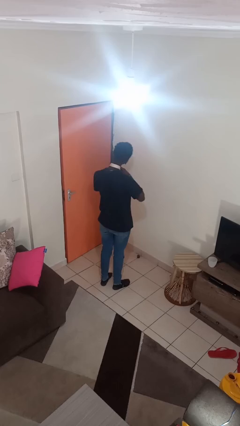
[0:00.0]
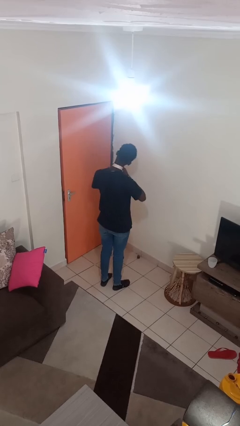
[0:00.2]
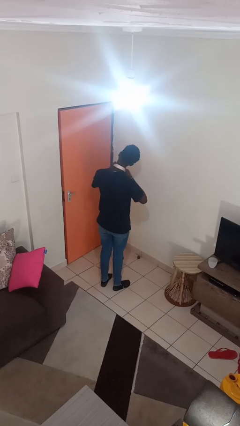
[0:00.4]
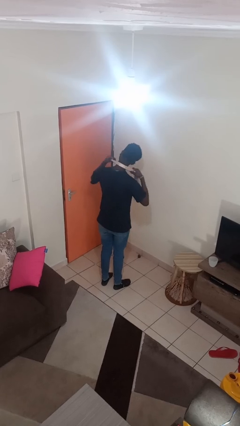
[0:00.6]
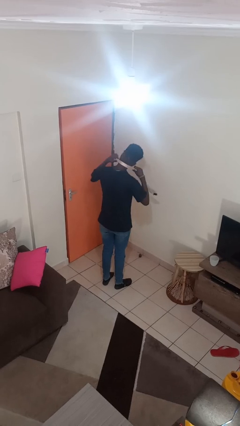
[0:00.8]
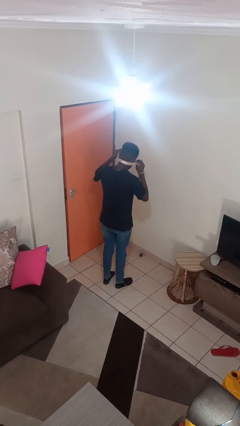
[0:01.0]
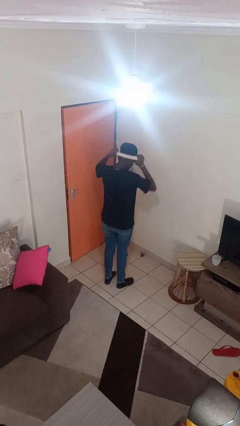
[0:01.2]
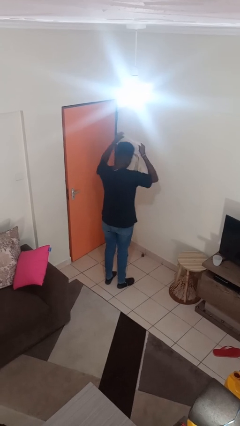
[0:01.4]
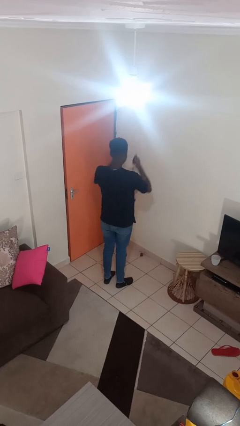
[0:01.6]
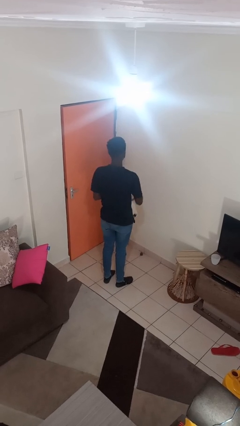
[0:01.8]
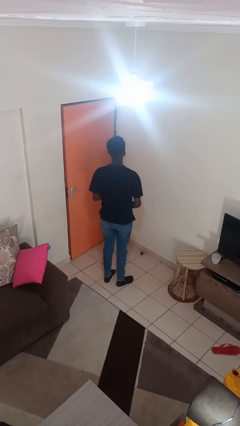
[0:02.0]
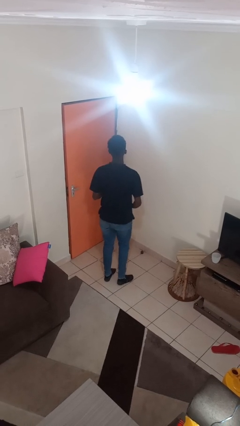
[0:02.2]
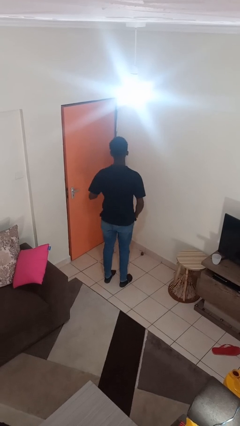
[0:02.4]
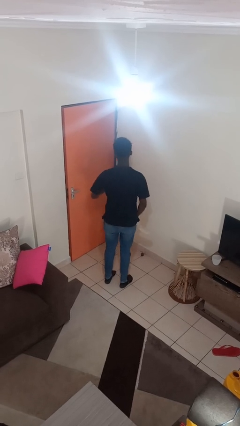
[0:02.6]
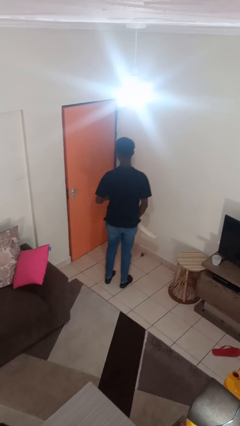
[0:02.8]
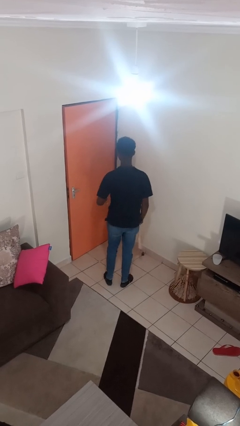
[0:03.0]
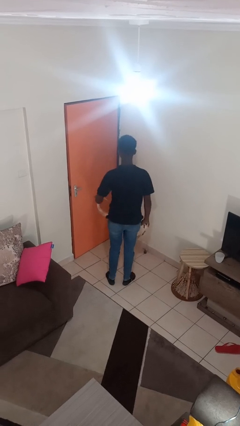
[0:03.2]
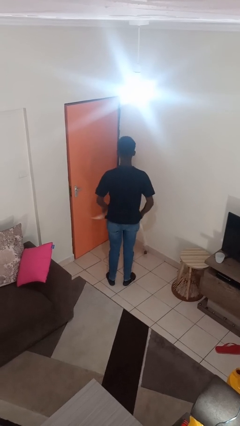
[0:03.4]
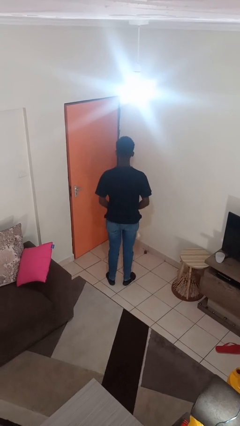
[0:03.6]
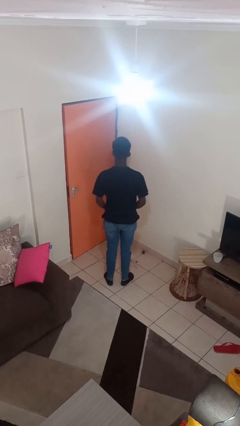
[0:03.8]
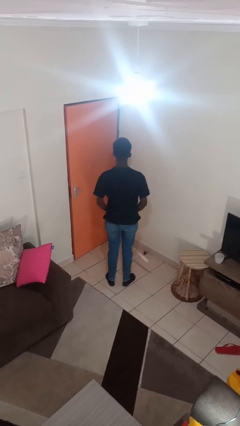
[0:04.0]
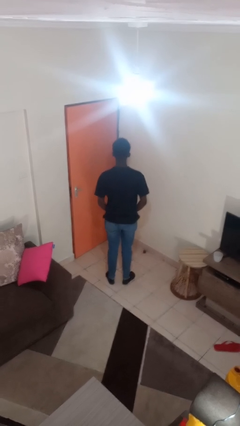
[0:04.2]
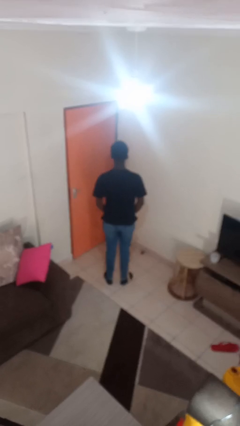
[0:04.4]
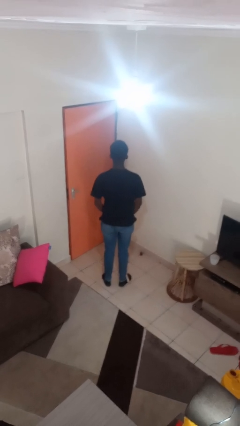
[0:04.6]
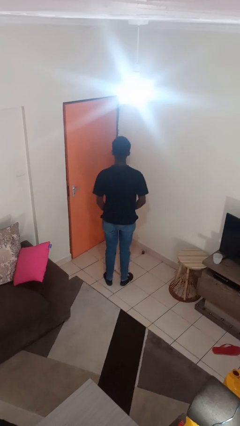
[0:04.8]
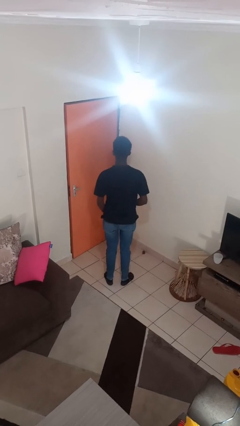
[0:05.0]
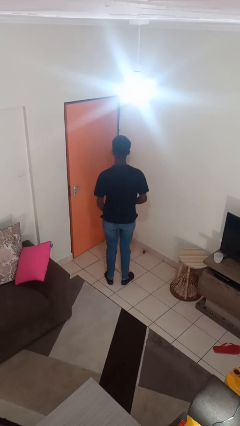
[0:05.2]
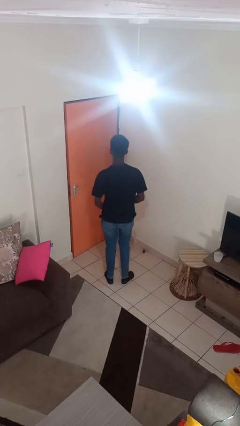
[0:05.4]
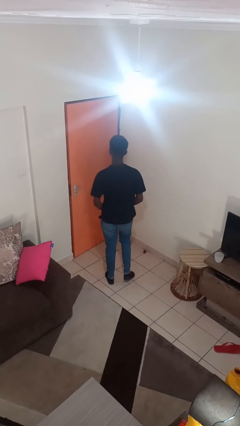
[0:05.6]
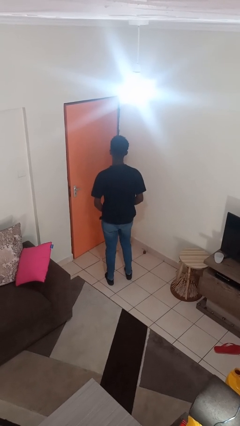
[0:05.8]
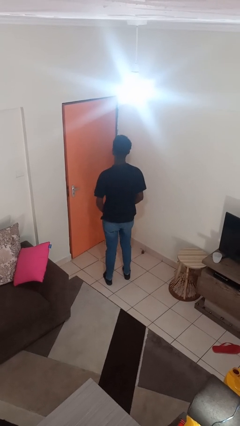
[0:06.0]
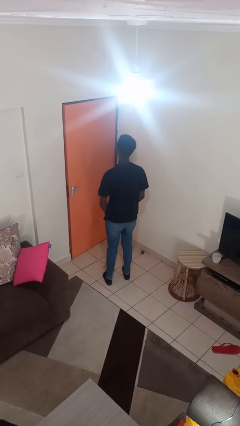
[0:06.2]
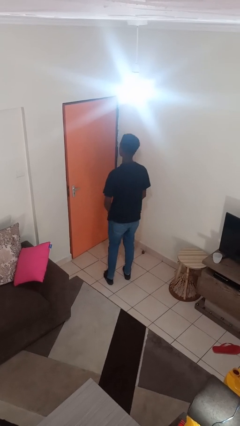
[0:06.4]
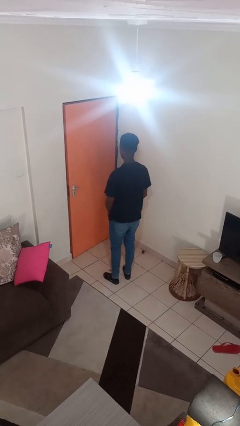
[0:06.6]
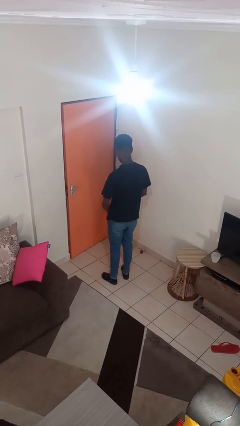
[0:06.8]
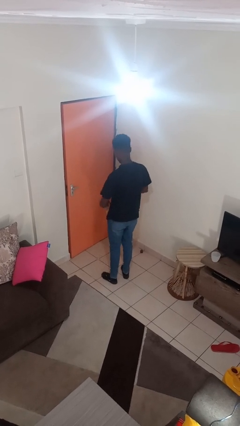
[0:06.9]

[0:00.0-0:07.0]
person takes off necktie

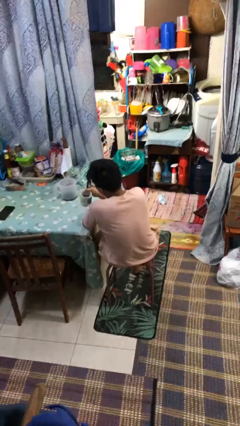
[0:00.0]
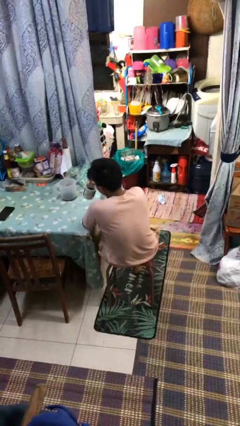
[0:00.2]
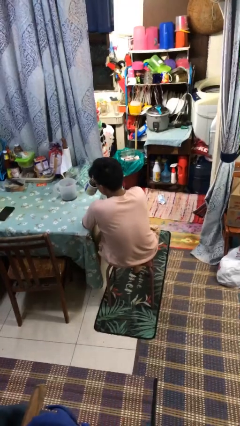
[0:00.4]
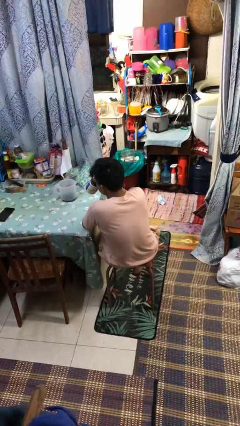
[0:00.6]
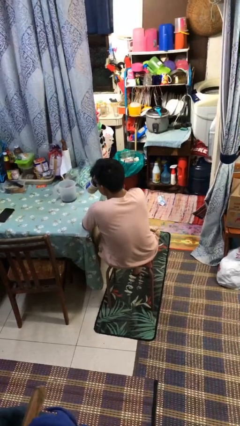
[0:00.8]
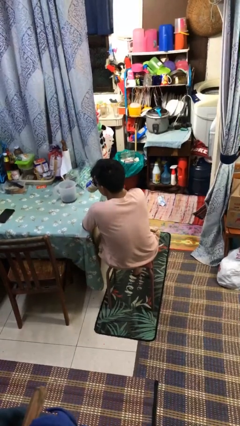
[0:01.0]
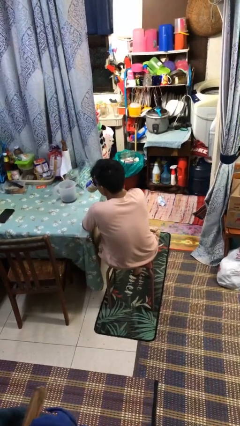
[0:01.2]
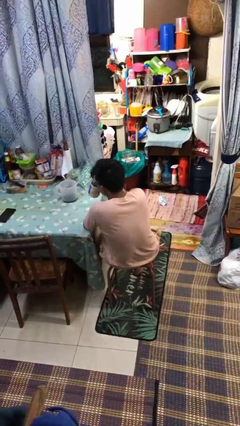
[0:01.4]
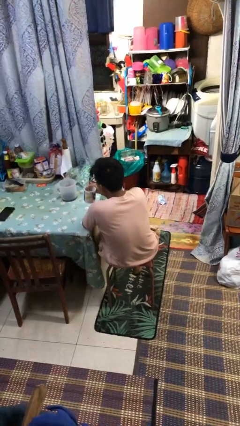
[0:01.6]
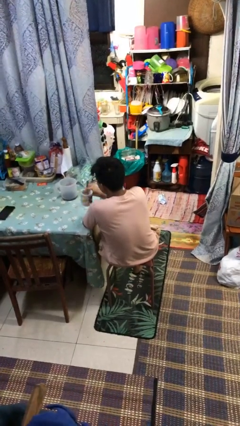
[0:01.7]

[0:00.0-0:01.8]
person drinks from mug

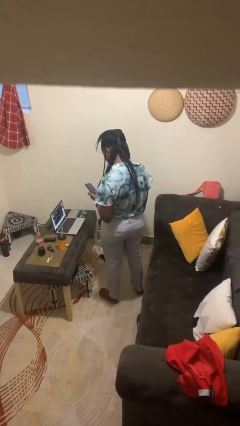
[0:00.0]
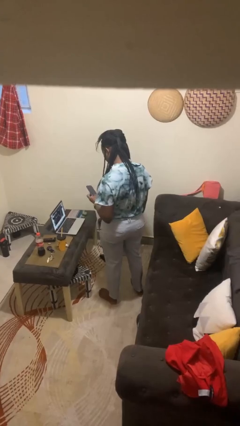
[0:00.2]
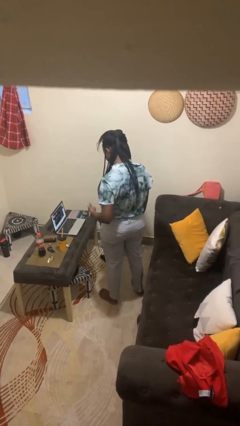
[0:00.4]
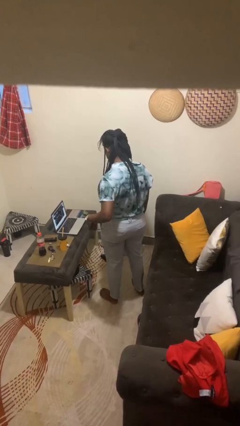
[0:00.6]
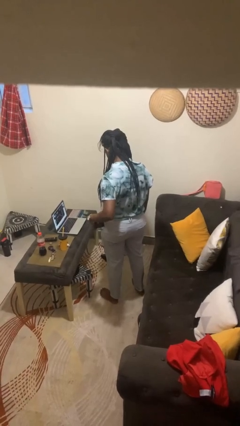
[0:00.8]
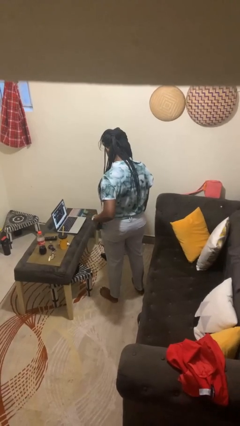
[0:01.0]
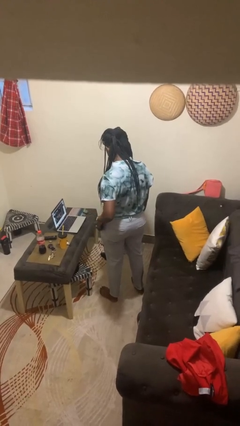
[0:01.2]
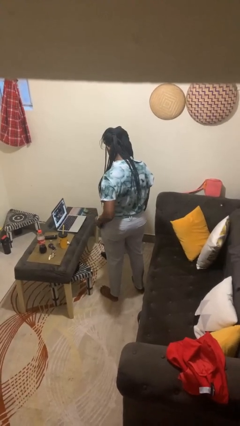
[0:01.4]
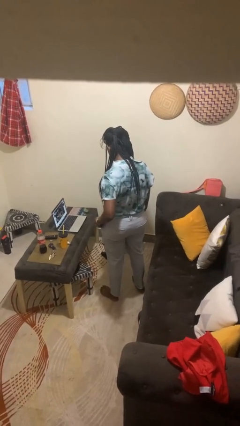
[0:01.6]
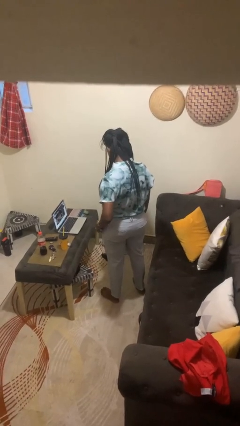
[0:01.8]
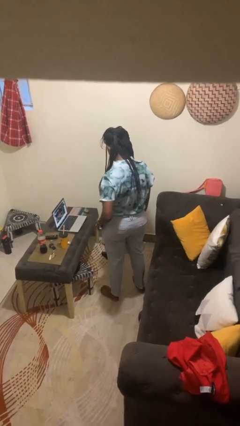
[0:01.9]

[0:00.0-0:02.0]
person puts phone into pocket

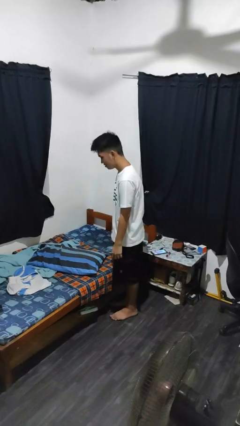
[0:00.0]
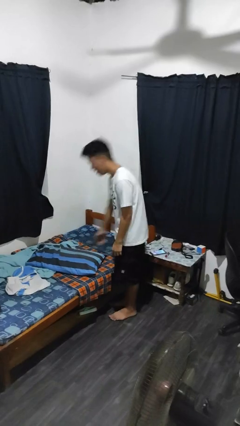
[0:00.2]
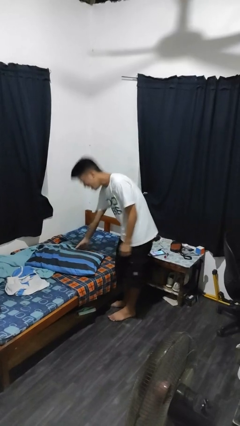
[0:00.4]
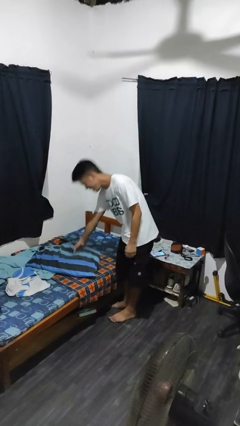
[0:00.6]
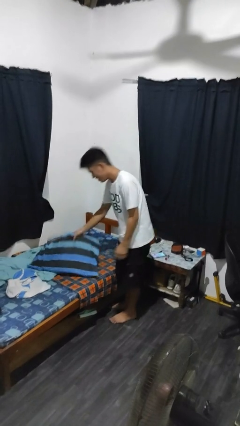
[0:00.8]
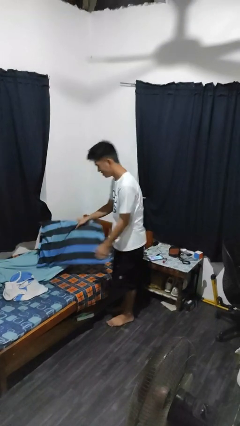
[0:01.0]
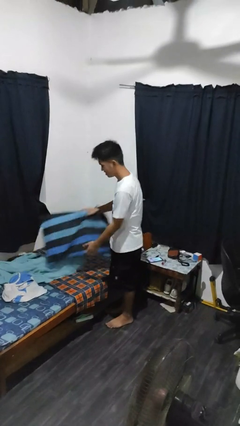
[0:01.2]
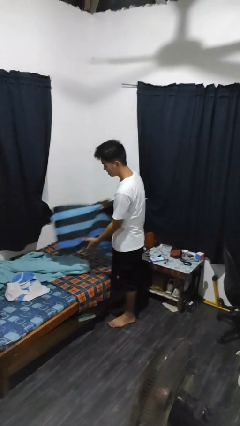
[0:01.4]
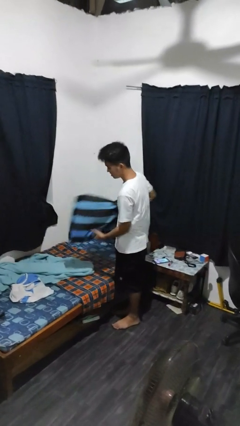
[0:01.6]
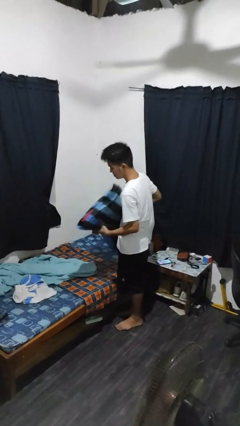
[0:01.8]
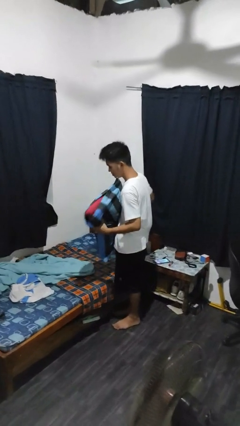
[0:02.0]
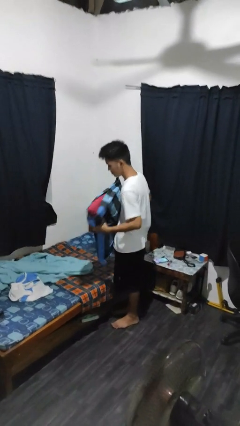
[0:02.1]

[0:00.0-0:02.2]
person picks up object from bed

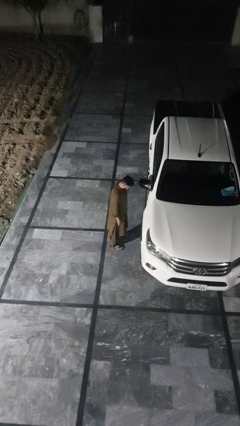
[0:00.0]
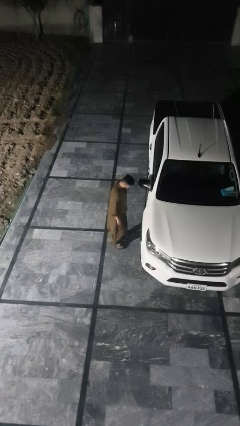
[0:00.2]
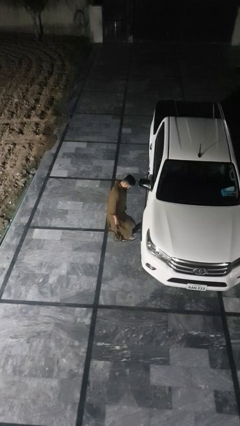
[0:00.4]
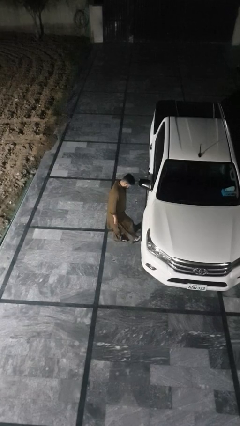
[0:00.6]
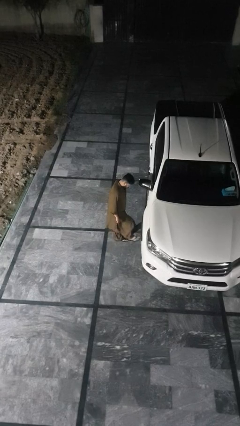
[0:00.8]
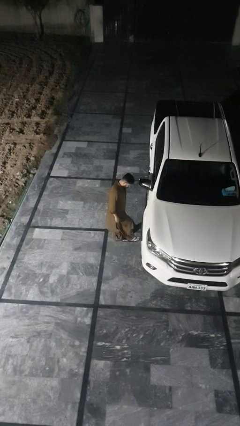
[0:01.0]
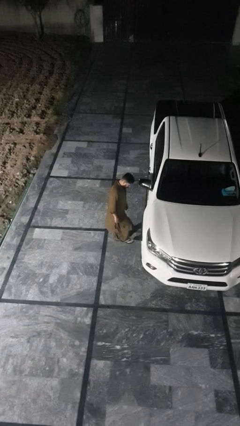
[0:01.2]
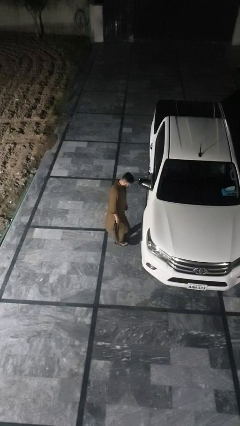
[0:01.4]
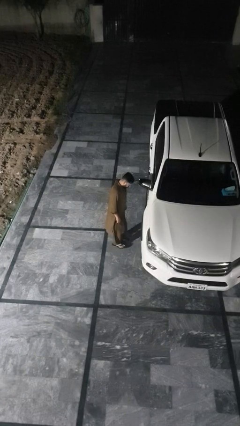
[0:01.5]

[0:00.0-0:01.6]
person kicks car tires

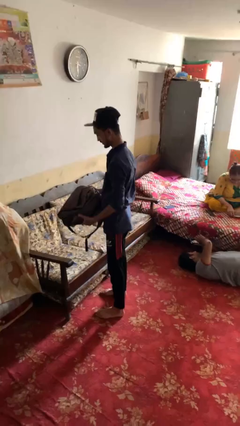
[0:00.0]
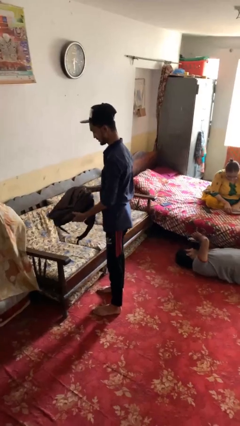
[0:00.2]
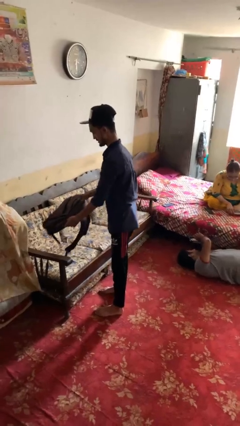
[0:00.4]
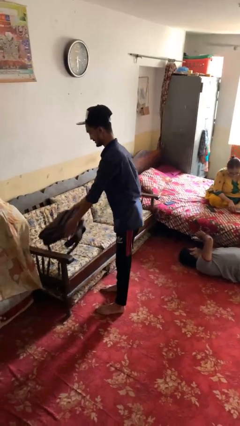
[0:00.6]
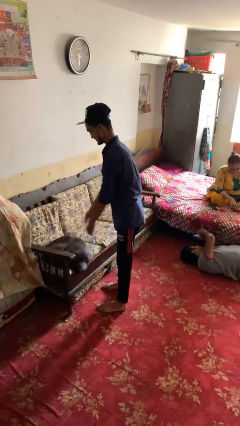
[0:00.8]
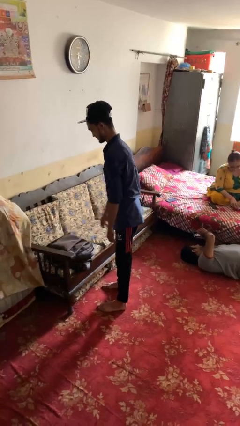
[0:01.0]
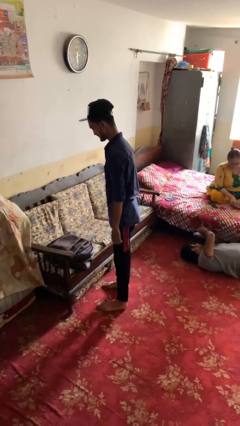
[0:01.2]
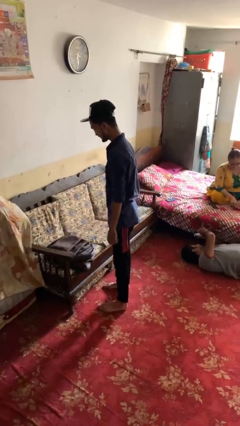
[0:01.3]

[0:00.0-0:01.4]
person puts down object on couch

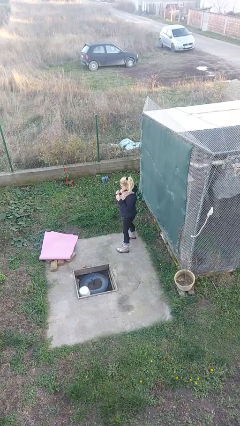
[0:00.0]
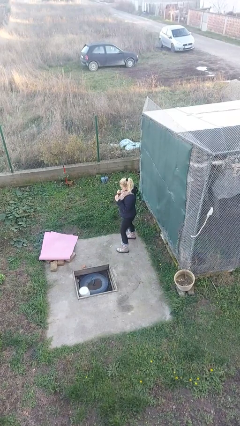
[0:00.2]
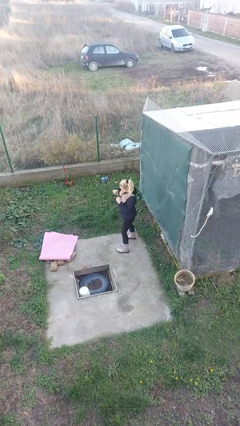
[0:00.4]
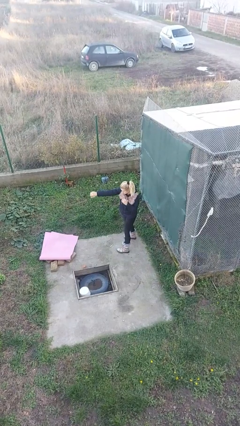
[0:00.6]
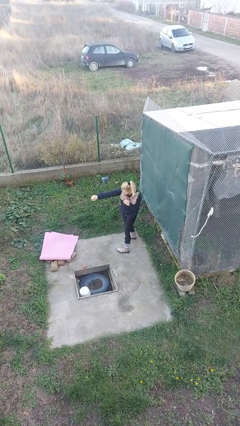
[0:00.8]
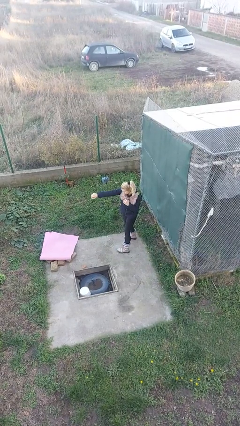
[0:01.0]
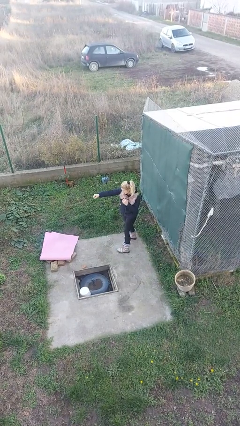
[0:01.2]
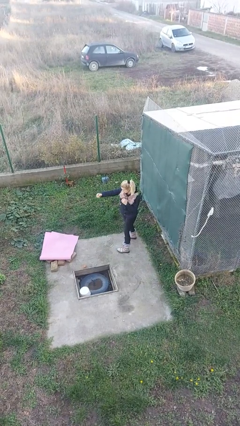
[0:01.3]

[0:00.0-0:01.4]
person punches
